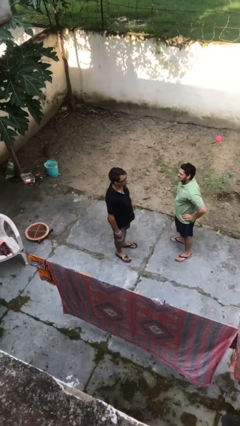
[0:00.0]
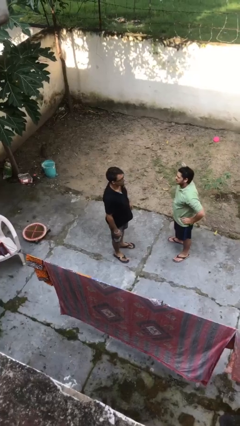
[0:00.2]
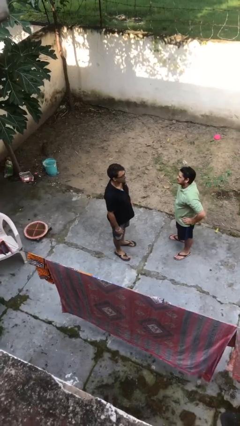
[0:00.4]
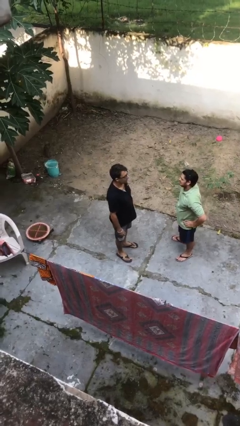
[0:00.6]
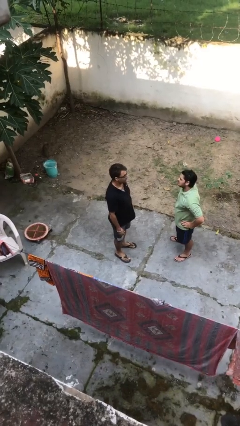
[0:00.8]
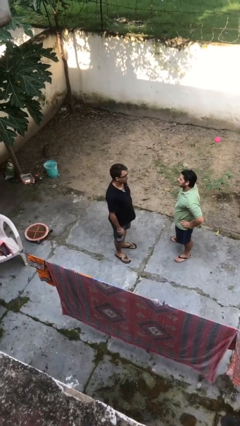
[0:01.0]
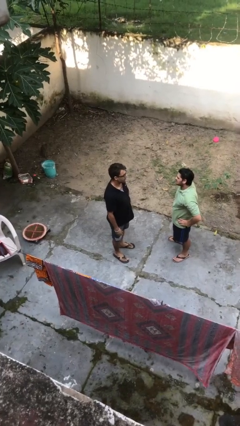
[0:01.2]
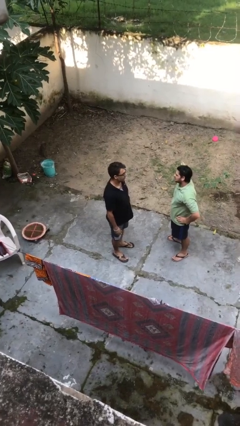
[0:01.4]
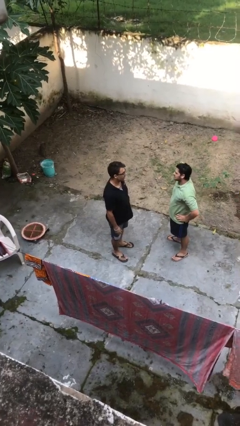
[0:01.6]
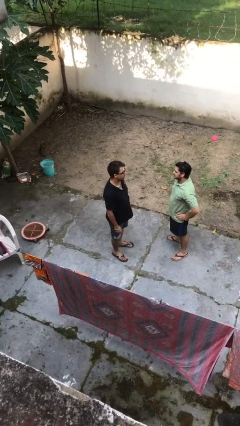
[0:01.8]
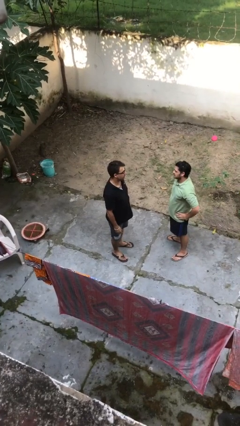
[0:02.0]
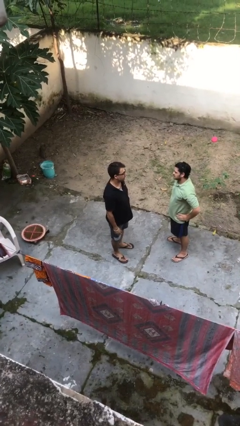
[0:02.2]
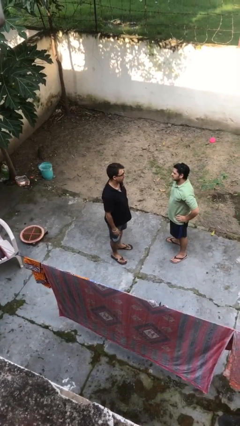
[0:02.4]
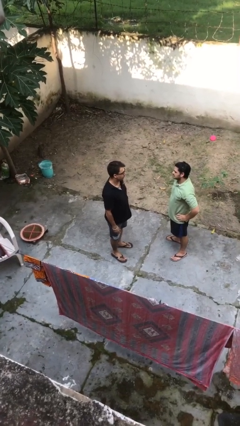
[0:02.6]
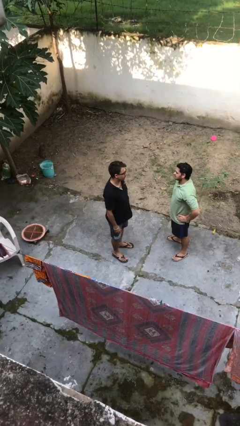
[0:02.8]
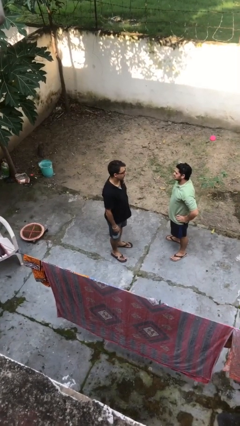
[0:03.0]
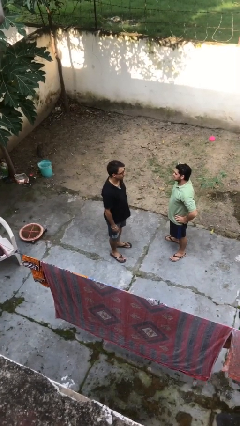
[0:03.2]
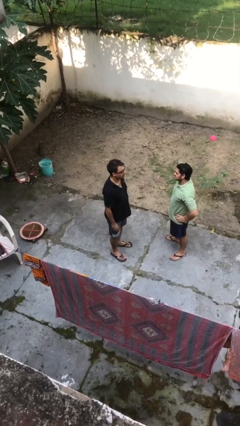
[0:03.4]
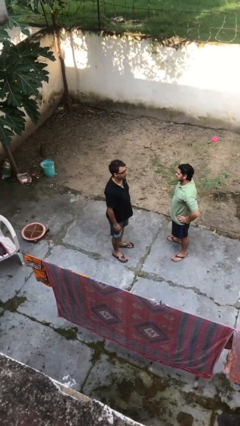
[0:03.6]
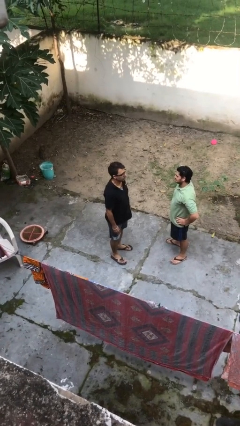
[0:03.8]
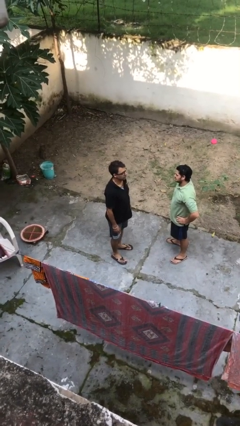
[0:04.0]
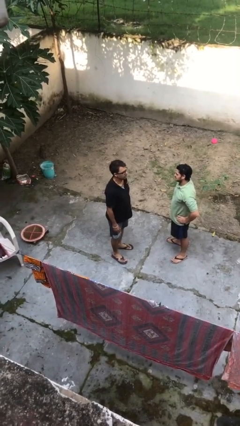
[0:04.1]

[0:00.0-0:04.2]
person talks to person

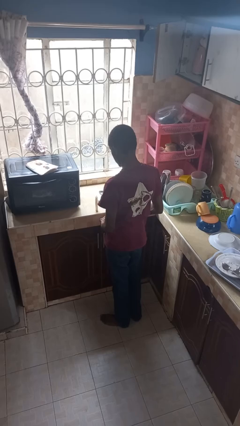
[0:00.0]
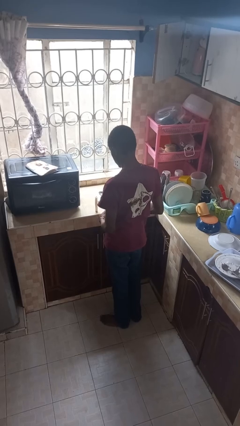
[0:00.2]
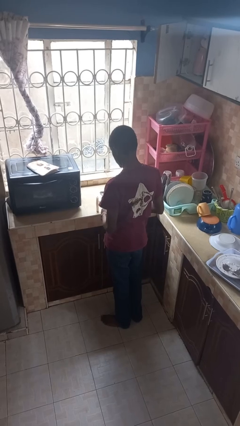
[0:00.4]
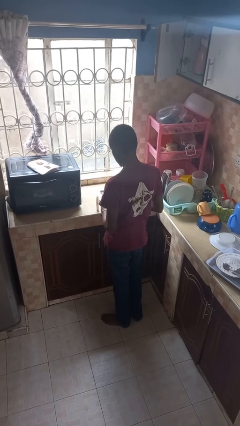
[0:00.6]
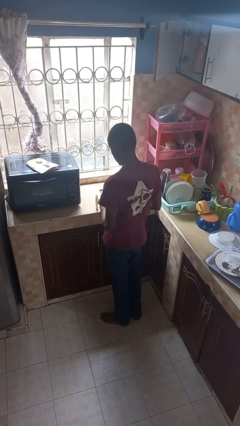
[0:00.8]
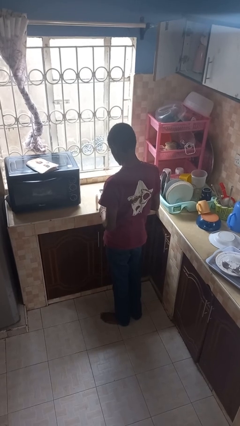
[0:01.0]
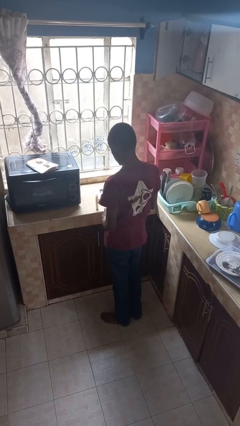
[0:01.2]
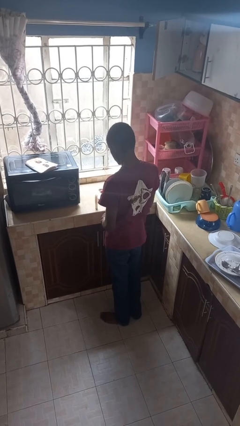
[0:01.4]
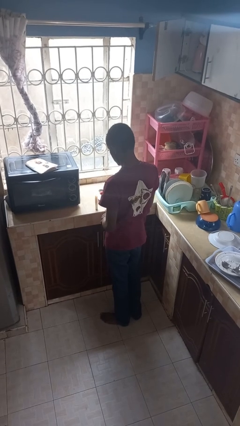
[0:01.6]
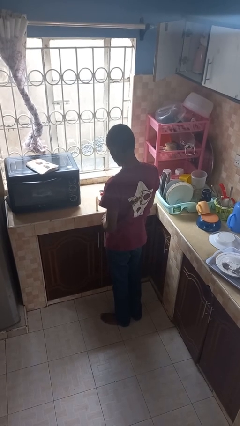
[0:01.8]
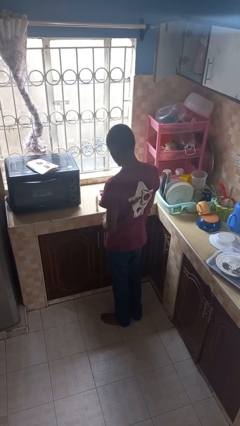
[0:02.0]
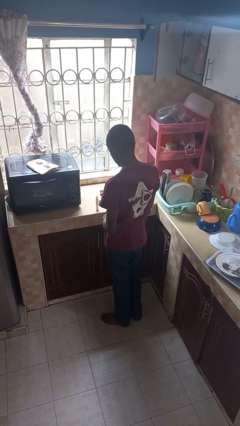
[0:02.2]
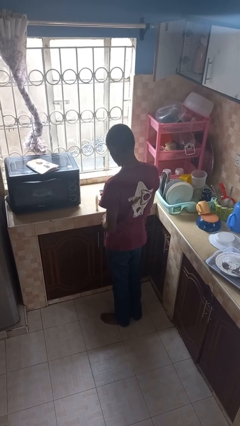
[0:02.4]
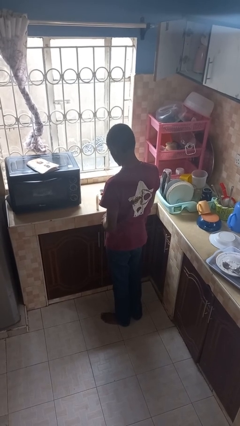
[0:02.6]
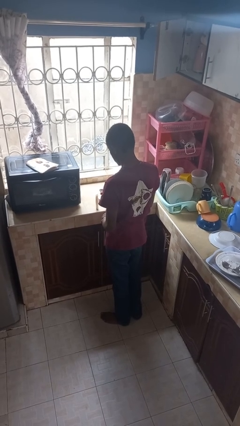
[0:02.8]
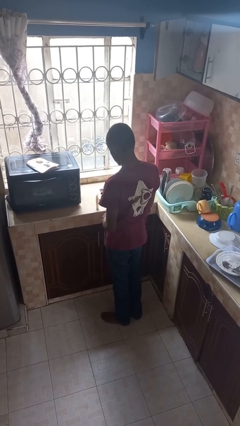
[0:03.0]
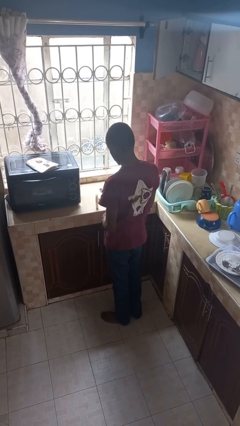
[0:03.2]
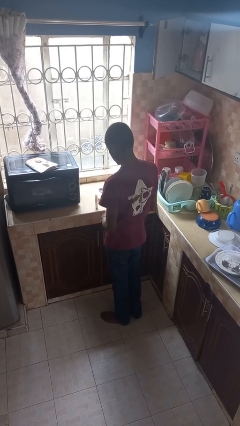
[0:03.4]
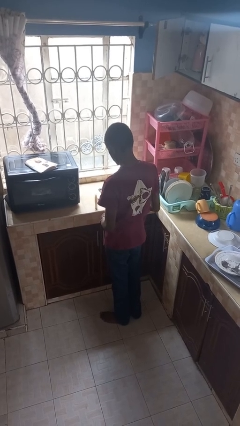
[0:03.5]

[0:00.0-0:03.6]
person lights candle

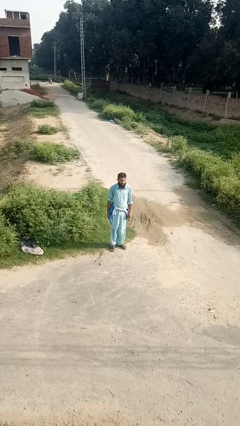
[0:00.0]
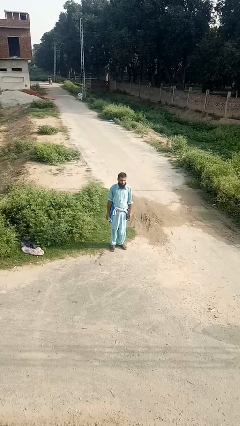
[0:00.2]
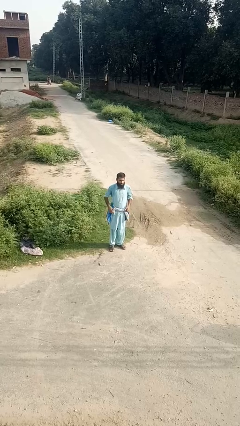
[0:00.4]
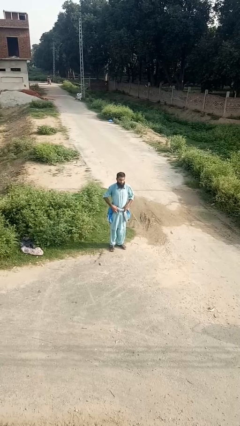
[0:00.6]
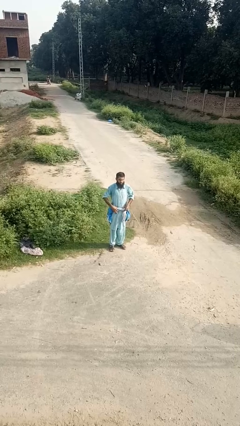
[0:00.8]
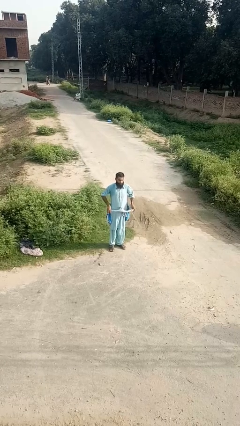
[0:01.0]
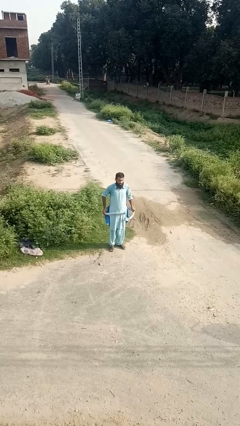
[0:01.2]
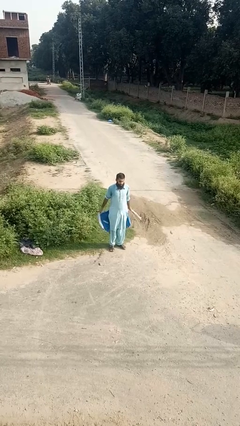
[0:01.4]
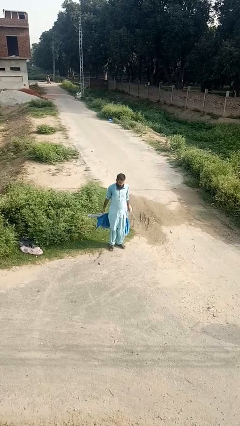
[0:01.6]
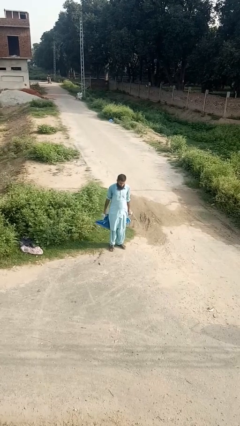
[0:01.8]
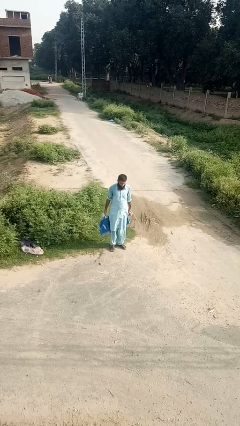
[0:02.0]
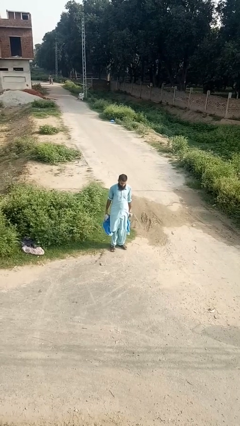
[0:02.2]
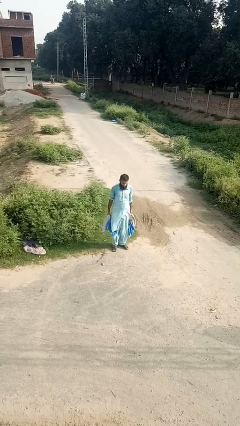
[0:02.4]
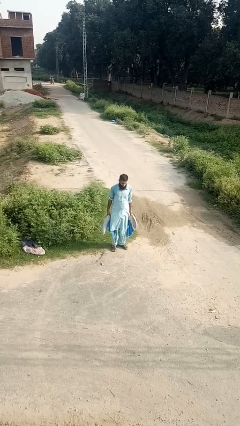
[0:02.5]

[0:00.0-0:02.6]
person unties jacket around waist

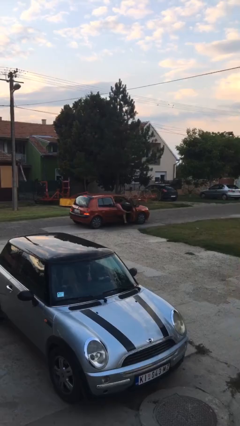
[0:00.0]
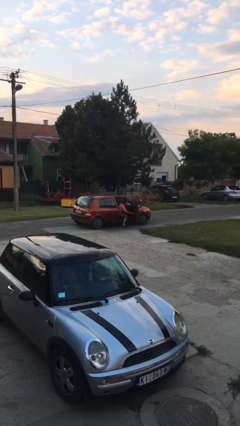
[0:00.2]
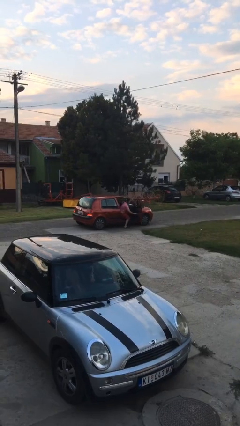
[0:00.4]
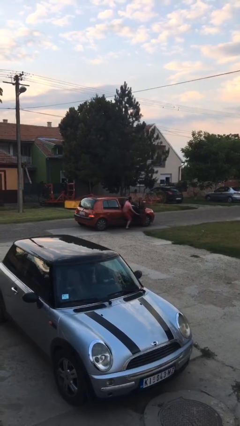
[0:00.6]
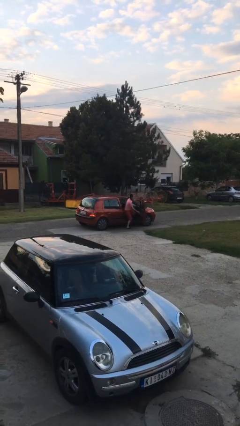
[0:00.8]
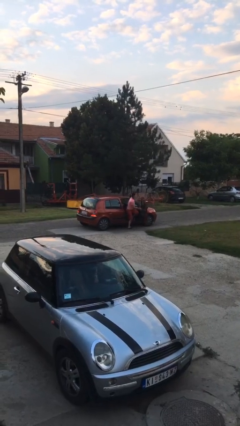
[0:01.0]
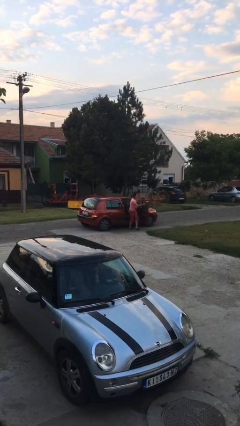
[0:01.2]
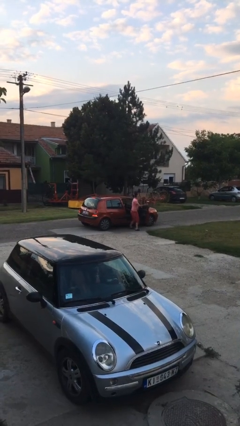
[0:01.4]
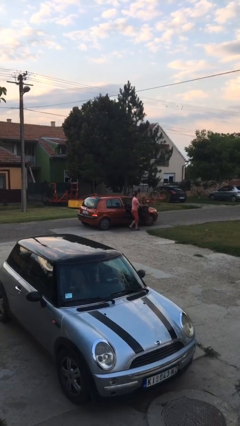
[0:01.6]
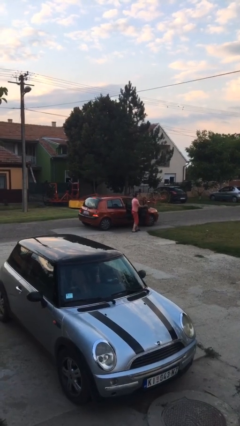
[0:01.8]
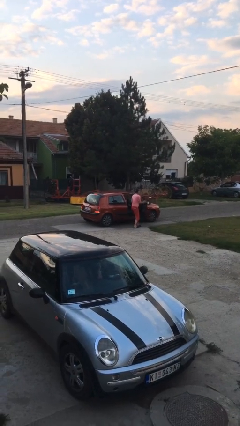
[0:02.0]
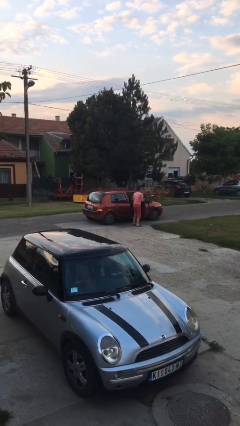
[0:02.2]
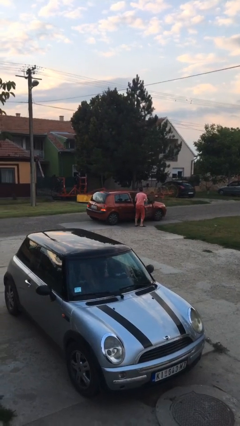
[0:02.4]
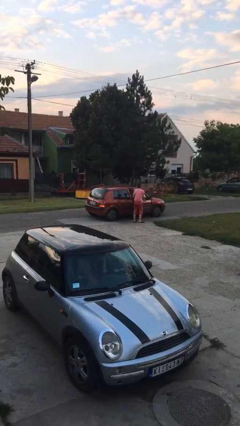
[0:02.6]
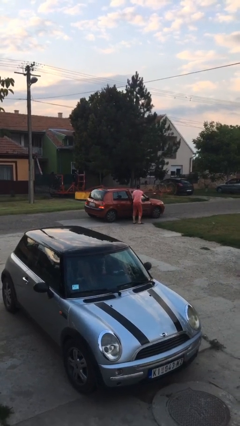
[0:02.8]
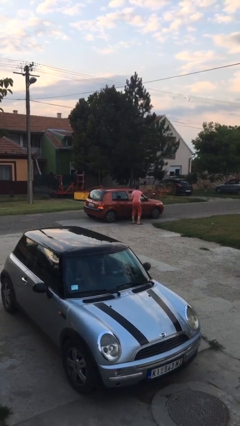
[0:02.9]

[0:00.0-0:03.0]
car drops off person

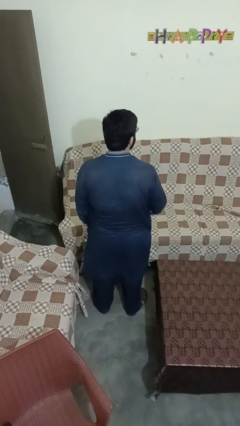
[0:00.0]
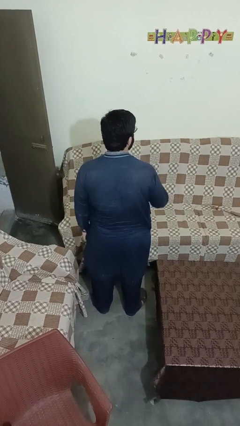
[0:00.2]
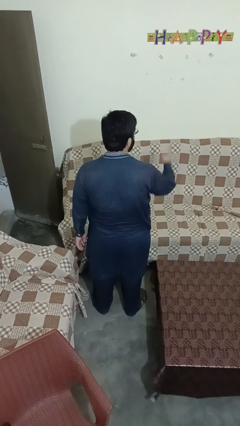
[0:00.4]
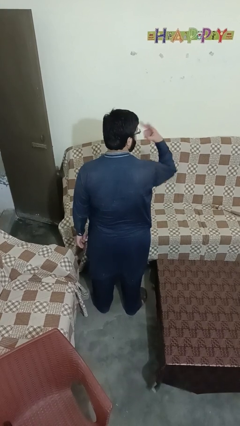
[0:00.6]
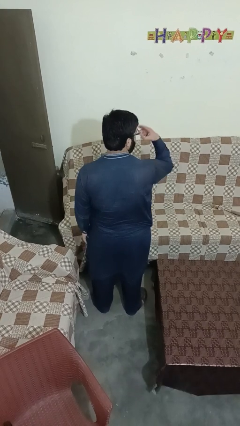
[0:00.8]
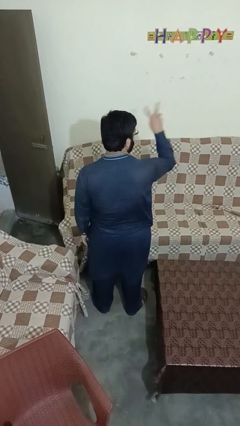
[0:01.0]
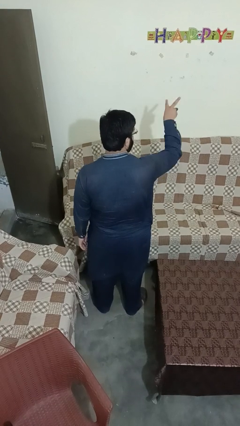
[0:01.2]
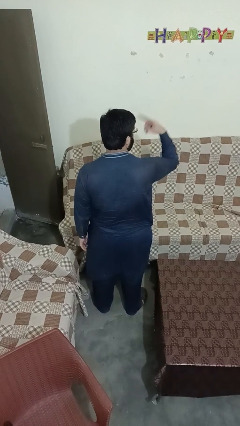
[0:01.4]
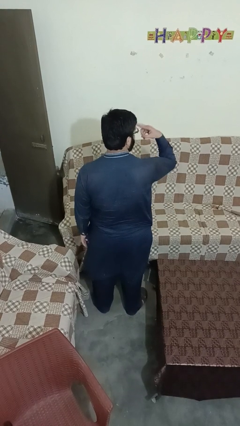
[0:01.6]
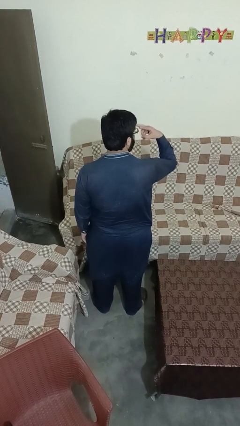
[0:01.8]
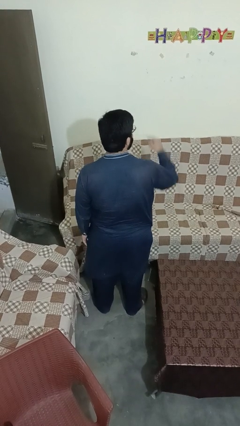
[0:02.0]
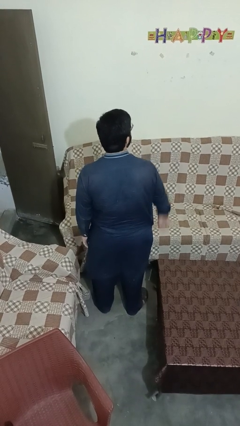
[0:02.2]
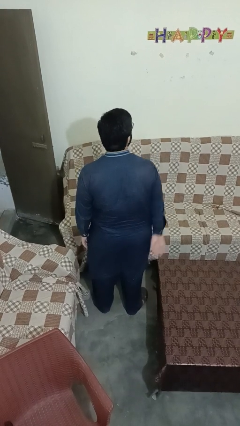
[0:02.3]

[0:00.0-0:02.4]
person gestures watch closely

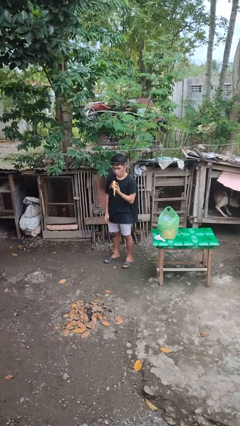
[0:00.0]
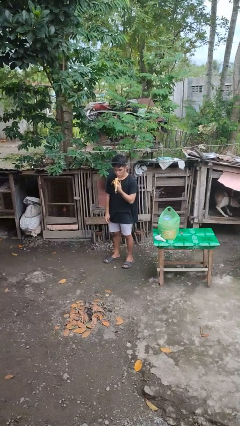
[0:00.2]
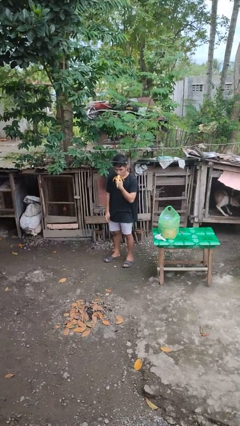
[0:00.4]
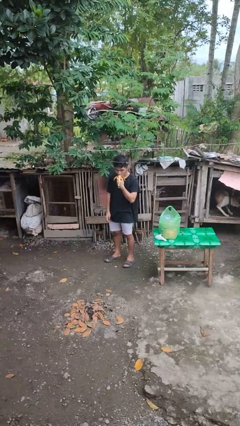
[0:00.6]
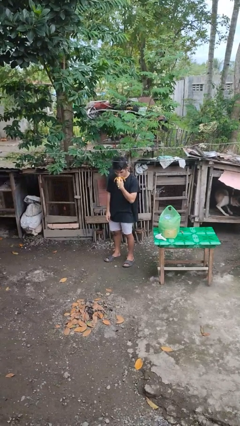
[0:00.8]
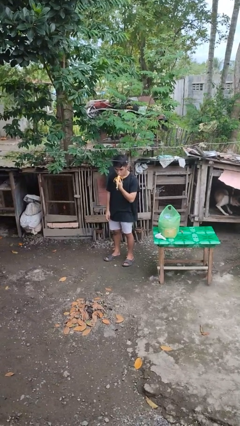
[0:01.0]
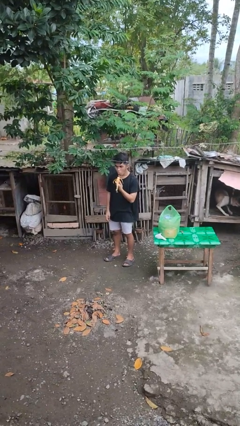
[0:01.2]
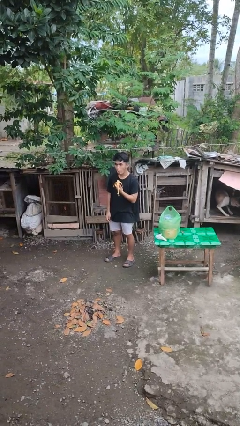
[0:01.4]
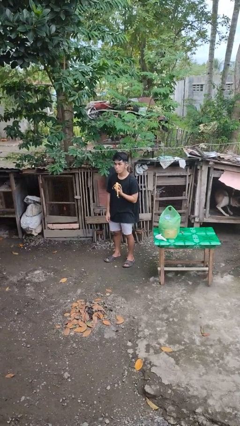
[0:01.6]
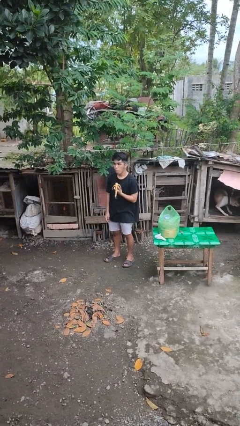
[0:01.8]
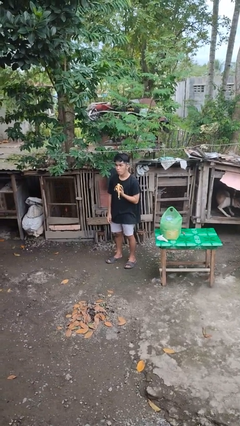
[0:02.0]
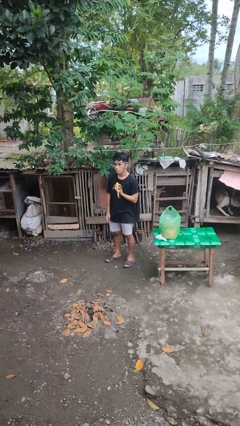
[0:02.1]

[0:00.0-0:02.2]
person eats banana
